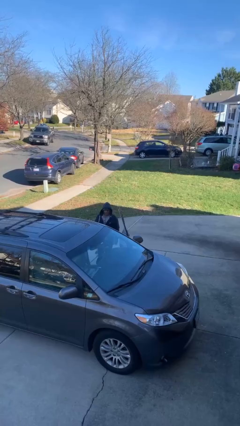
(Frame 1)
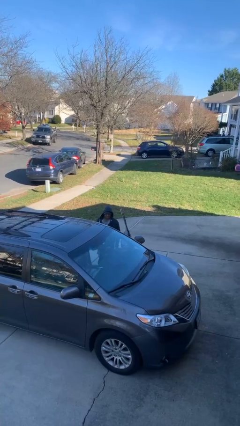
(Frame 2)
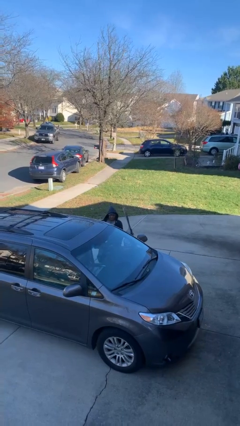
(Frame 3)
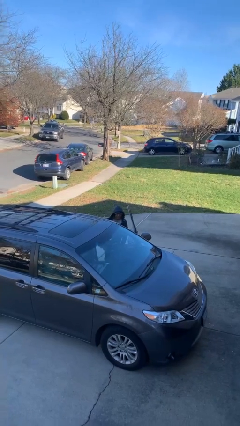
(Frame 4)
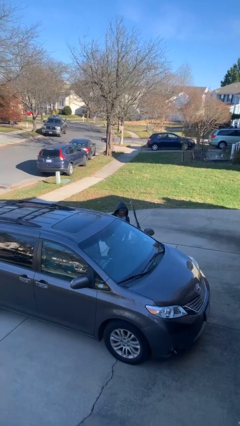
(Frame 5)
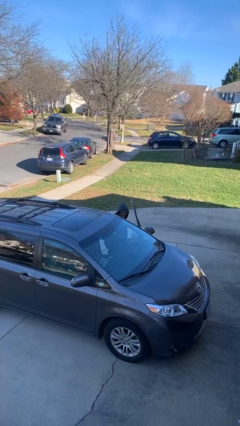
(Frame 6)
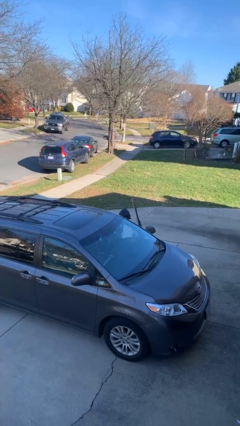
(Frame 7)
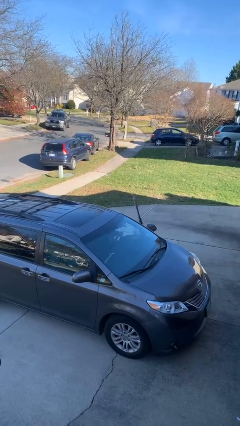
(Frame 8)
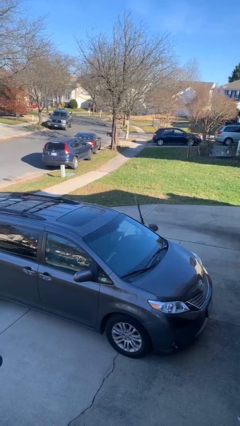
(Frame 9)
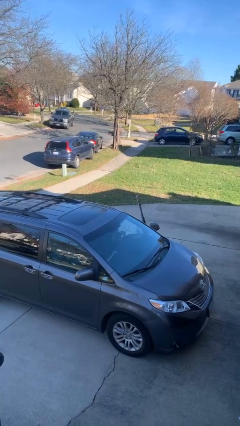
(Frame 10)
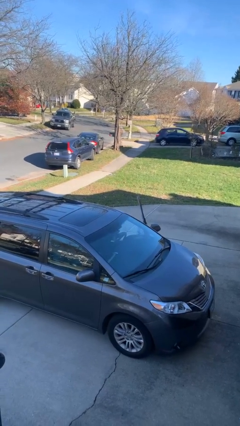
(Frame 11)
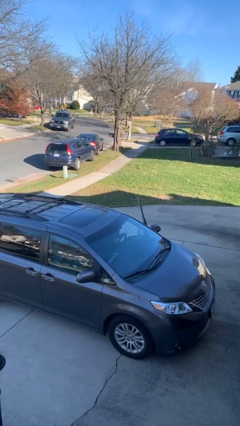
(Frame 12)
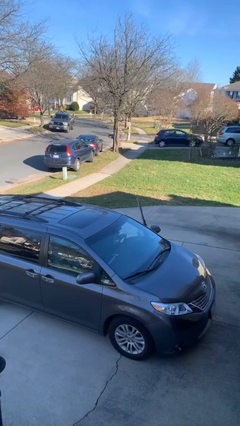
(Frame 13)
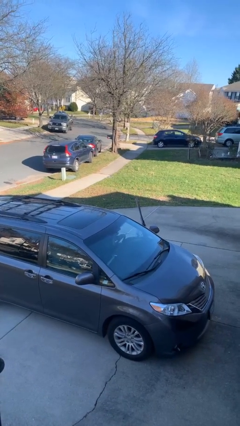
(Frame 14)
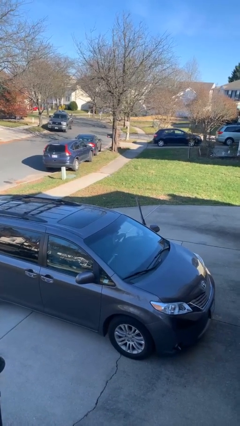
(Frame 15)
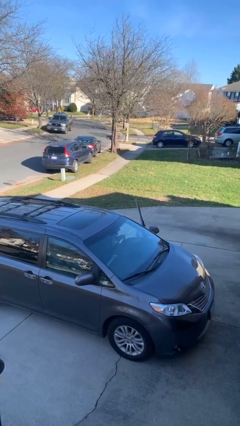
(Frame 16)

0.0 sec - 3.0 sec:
person enters car

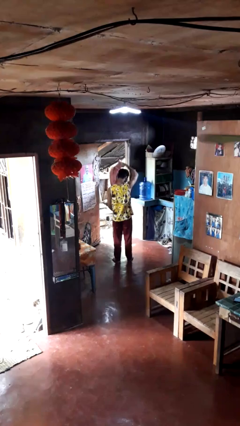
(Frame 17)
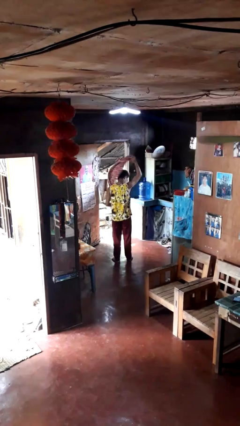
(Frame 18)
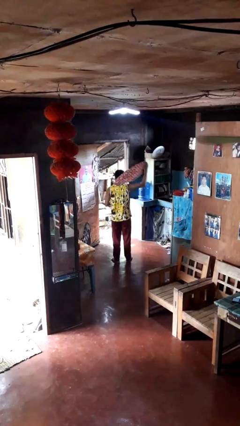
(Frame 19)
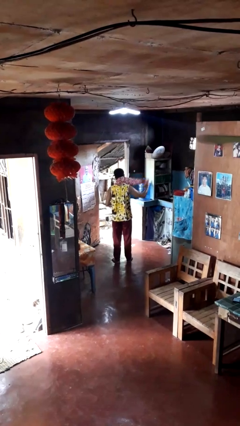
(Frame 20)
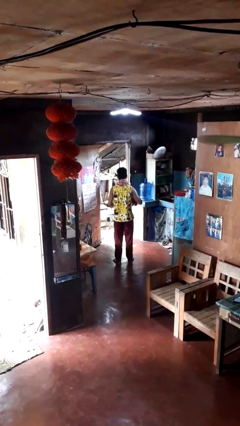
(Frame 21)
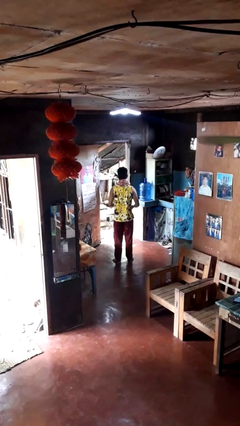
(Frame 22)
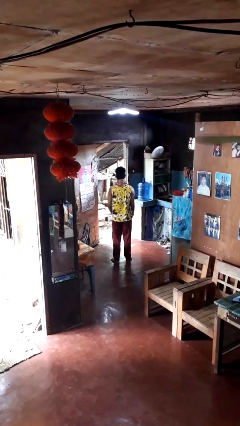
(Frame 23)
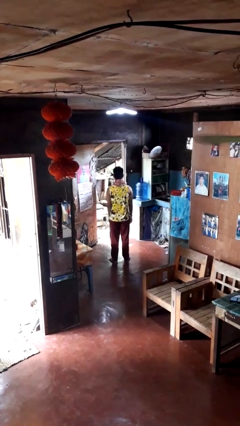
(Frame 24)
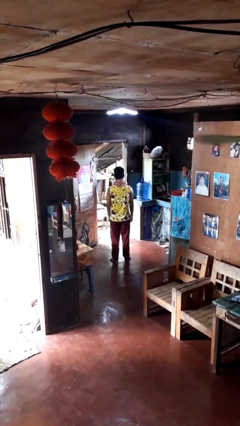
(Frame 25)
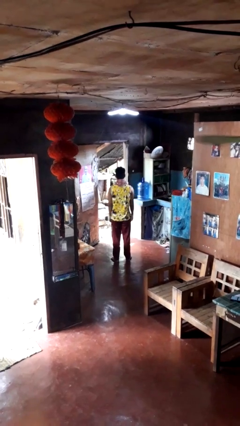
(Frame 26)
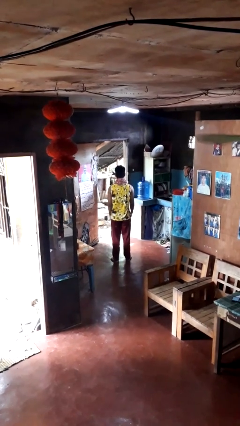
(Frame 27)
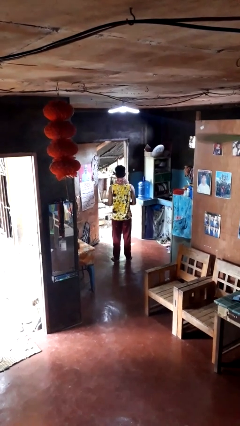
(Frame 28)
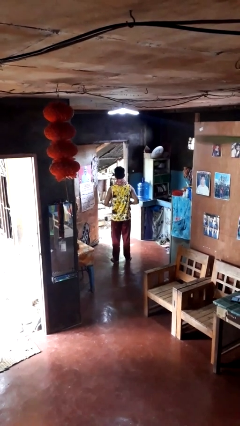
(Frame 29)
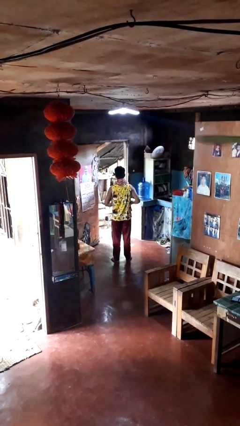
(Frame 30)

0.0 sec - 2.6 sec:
person puts on scarf

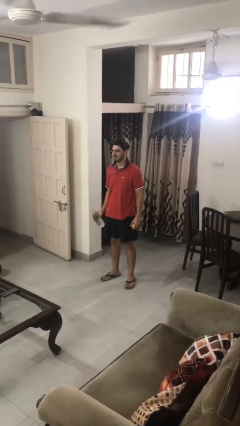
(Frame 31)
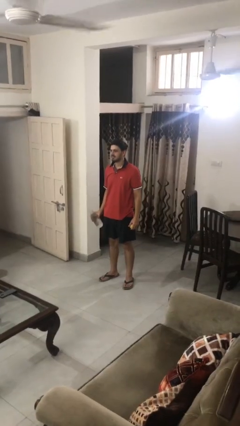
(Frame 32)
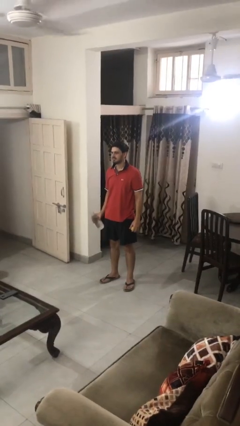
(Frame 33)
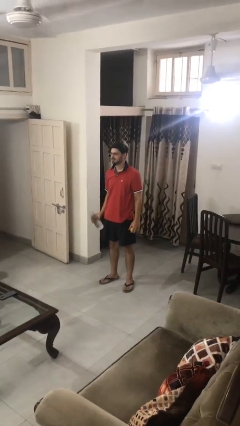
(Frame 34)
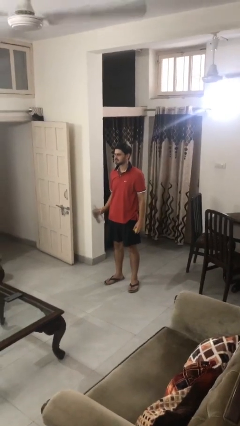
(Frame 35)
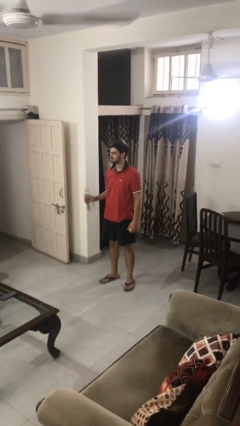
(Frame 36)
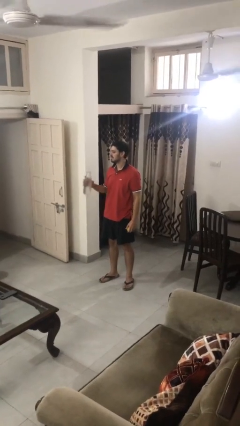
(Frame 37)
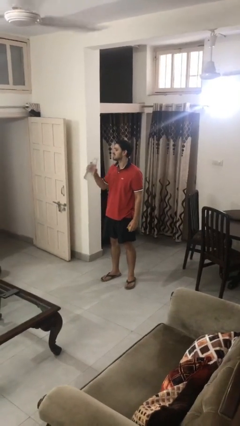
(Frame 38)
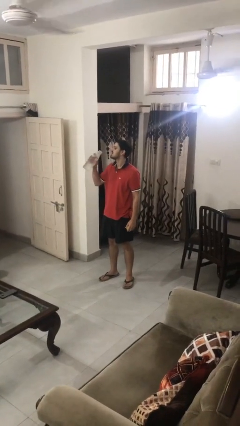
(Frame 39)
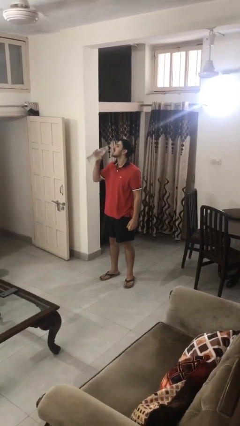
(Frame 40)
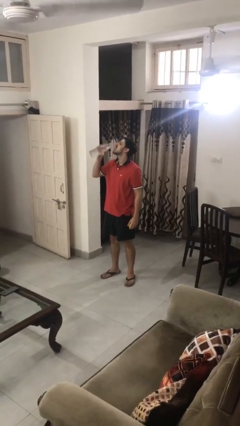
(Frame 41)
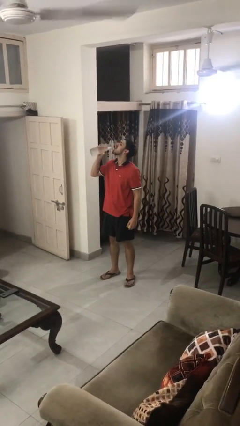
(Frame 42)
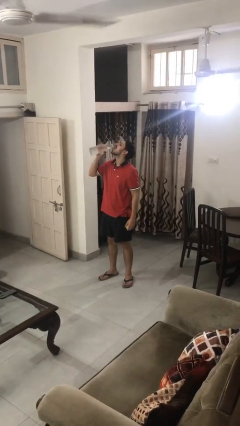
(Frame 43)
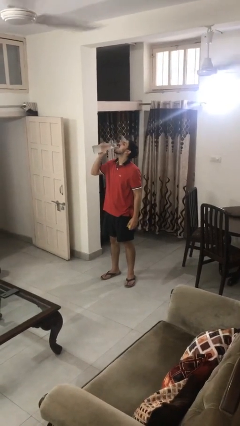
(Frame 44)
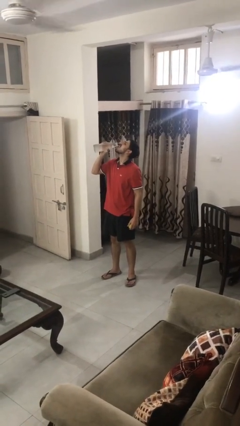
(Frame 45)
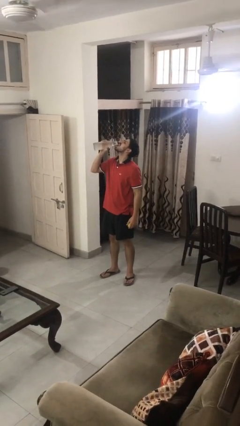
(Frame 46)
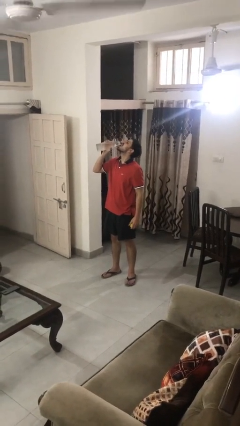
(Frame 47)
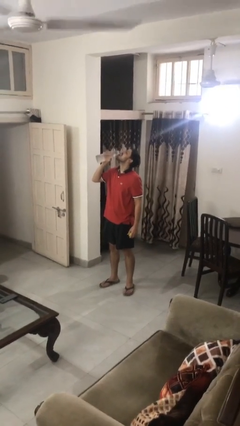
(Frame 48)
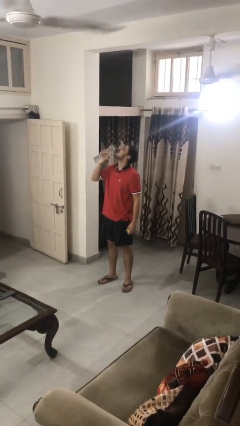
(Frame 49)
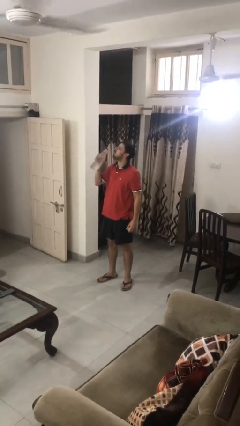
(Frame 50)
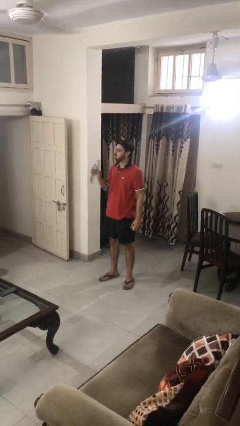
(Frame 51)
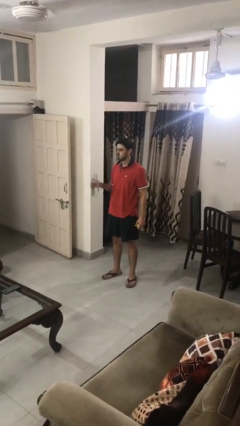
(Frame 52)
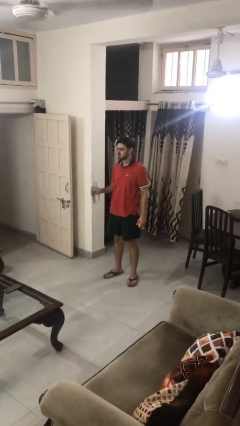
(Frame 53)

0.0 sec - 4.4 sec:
person drinks from bottle

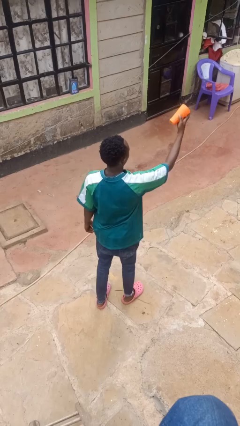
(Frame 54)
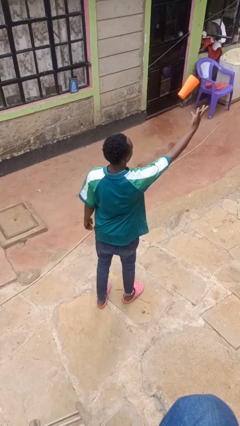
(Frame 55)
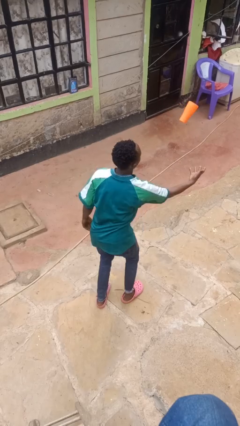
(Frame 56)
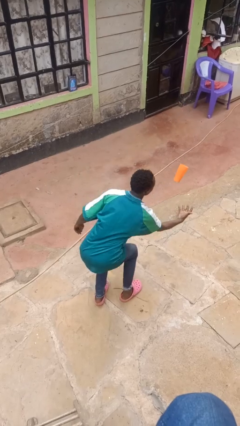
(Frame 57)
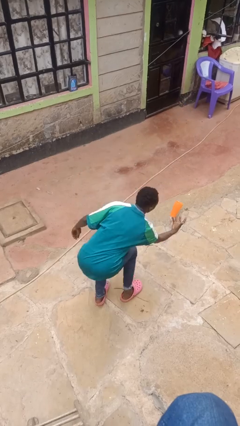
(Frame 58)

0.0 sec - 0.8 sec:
person drops object

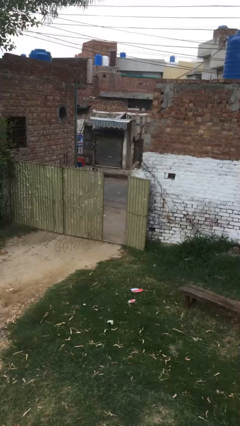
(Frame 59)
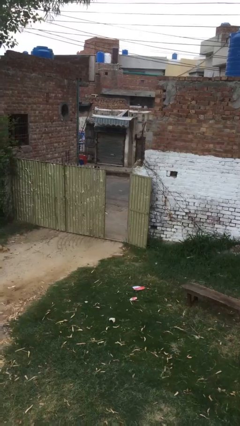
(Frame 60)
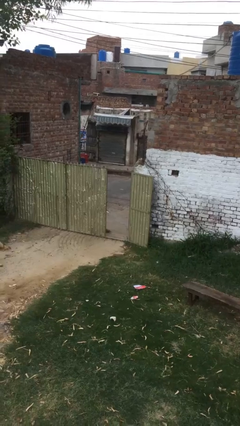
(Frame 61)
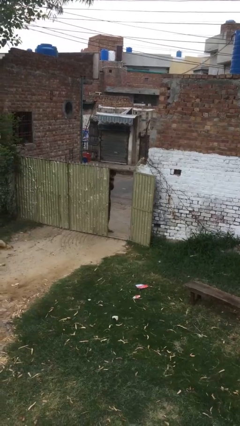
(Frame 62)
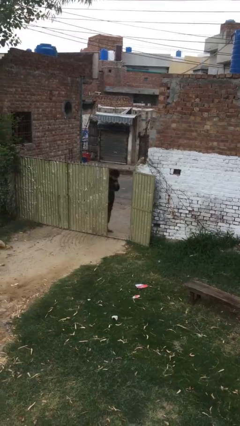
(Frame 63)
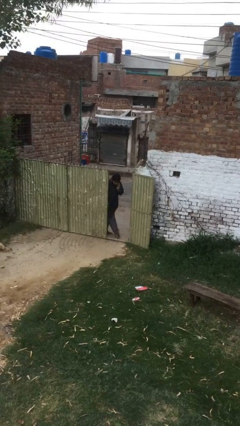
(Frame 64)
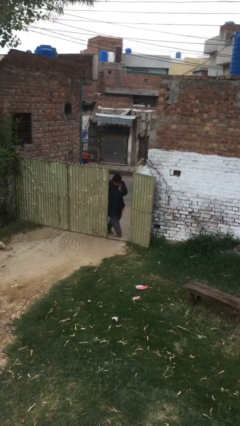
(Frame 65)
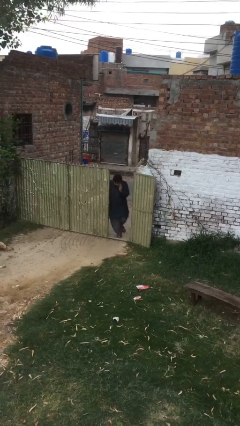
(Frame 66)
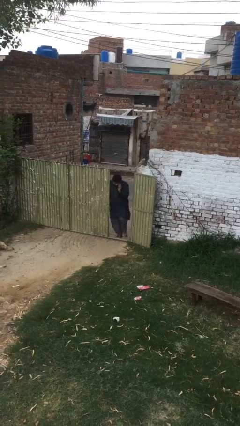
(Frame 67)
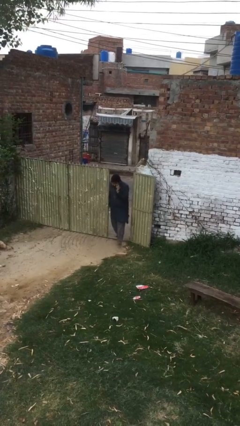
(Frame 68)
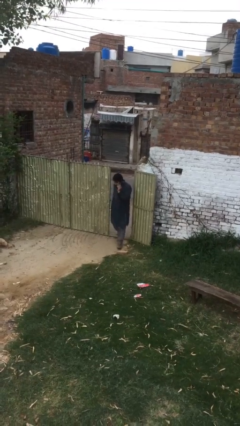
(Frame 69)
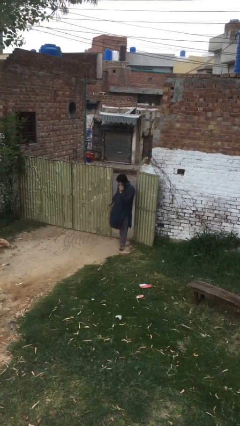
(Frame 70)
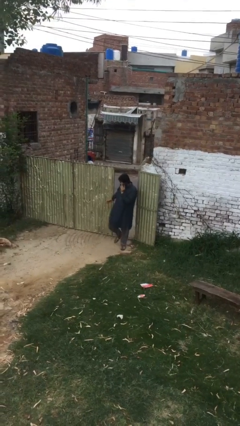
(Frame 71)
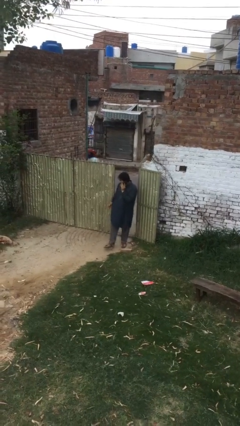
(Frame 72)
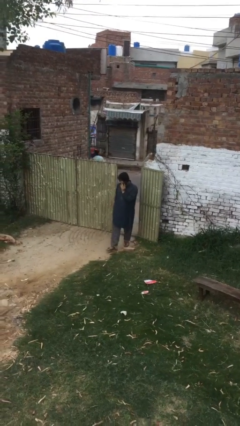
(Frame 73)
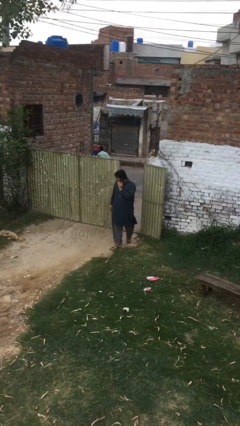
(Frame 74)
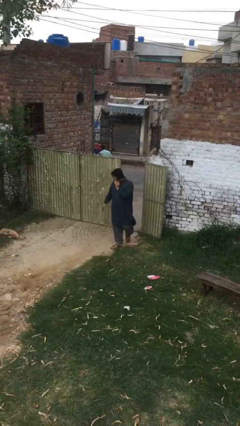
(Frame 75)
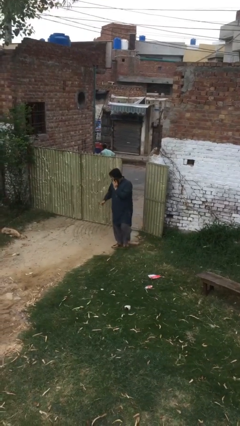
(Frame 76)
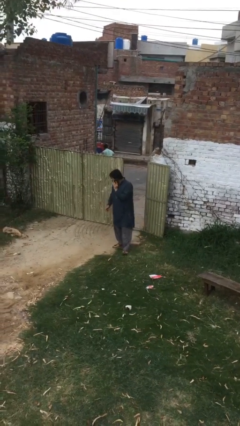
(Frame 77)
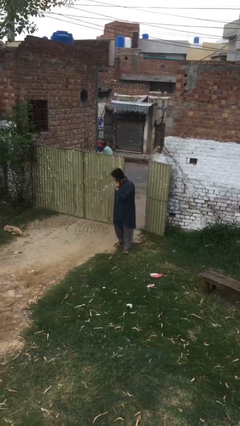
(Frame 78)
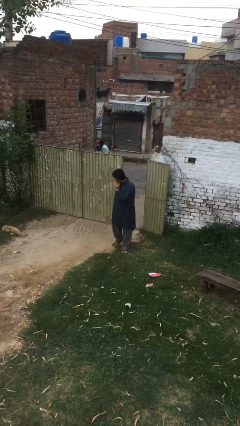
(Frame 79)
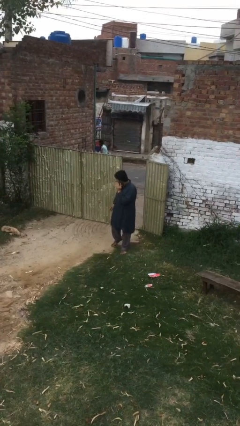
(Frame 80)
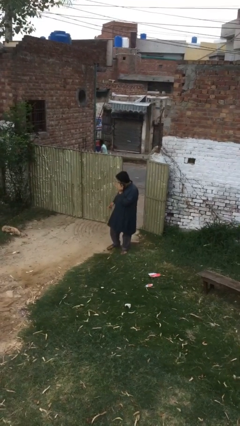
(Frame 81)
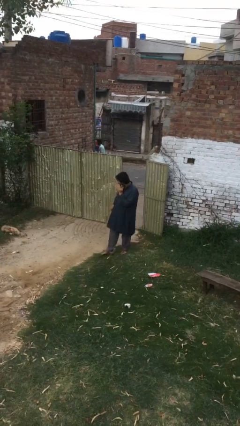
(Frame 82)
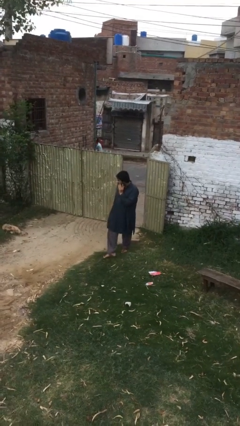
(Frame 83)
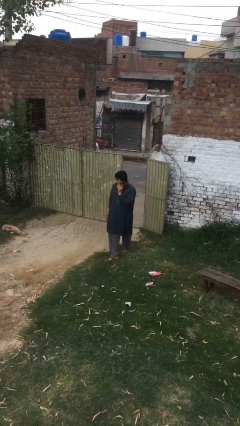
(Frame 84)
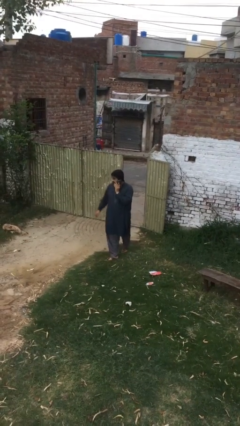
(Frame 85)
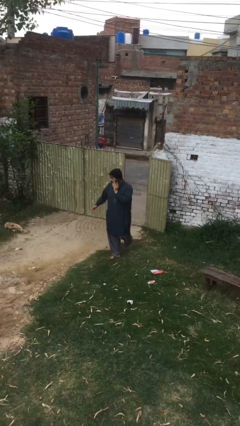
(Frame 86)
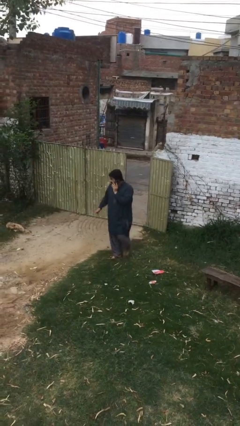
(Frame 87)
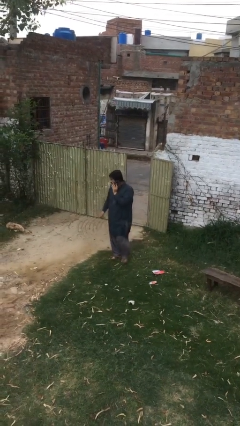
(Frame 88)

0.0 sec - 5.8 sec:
person enters scene through structure
